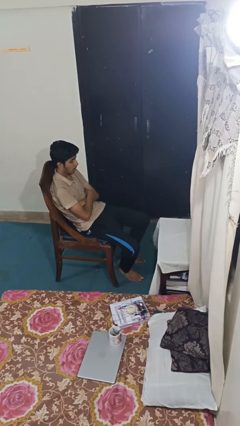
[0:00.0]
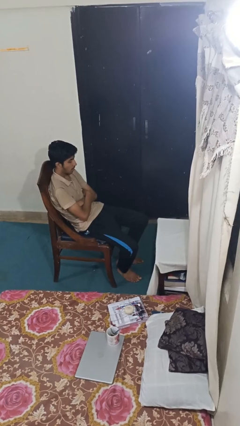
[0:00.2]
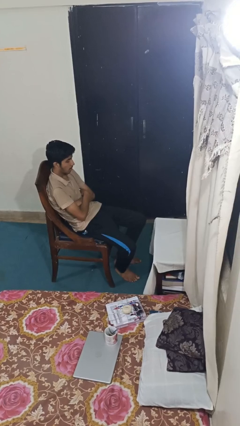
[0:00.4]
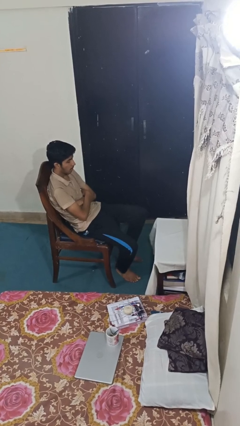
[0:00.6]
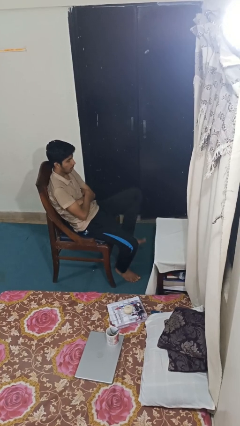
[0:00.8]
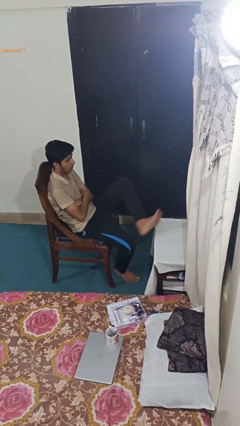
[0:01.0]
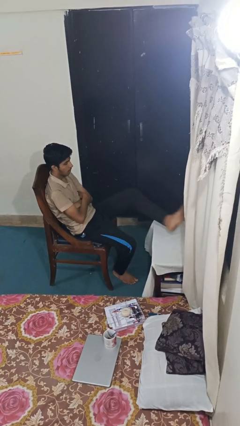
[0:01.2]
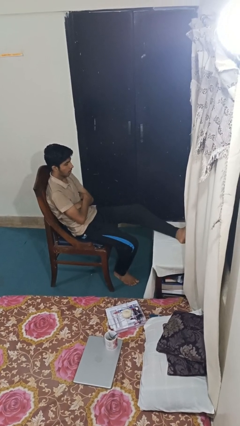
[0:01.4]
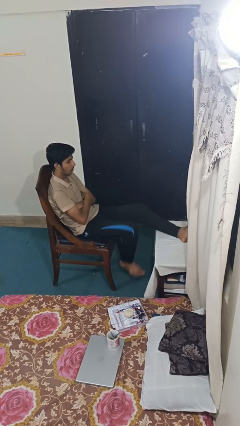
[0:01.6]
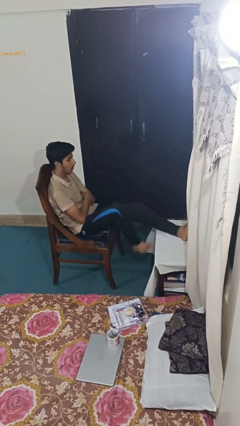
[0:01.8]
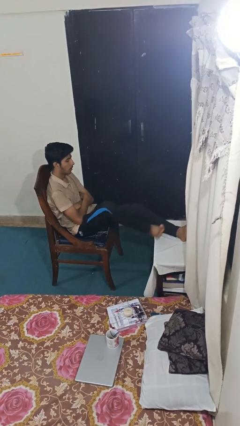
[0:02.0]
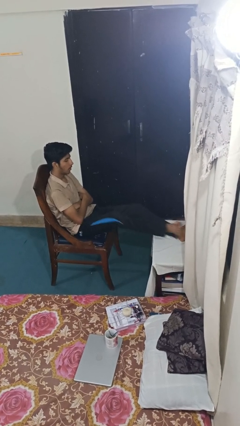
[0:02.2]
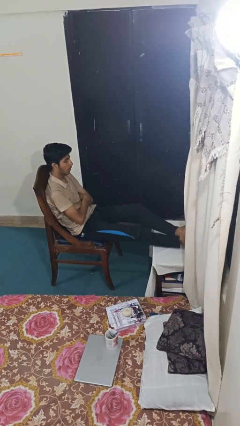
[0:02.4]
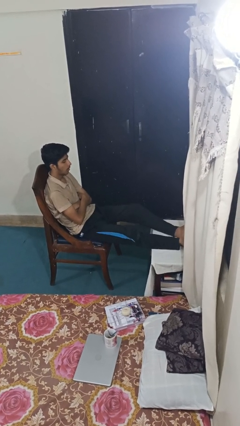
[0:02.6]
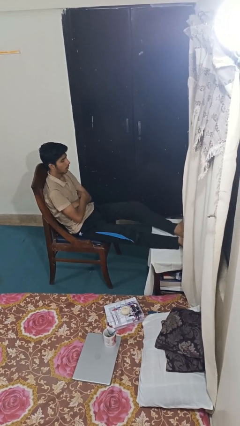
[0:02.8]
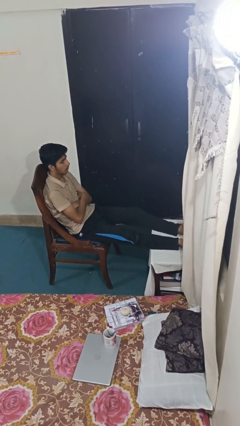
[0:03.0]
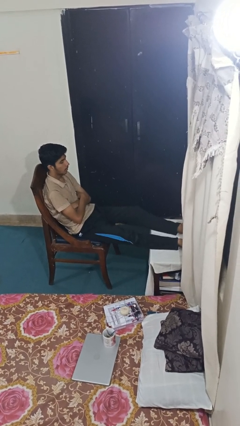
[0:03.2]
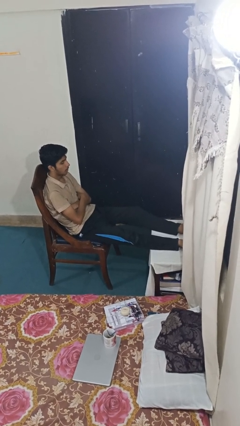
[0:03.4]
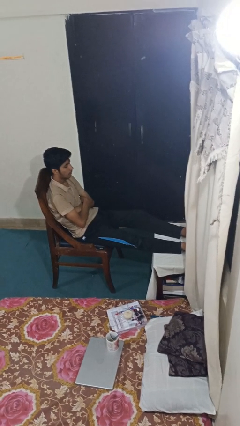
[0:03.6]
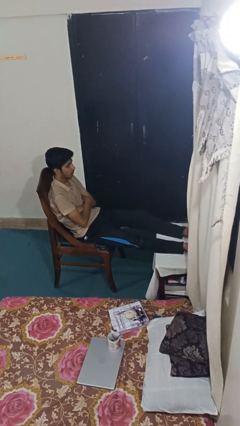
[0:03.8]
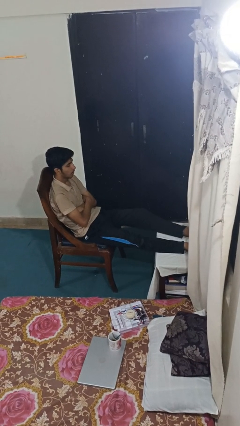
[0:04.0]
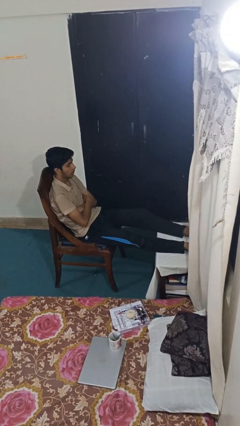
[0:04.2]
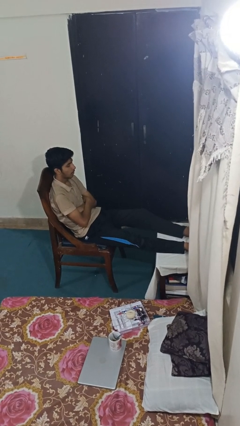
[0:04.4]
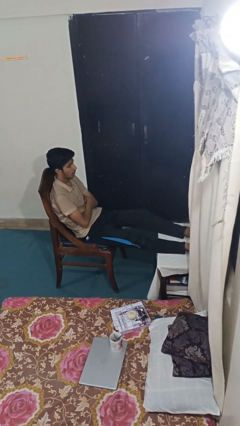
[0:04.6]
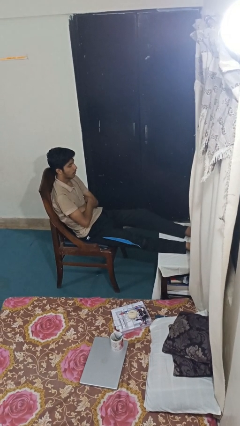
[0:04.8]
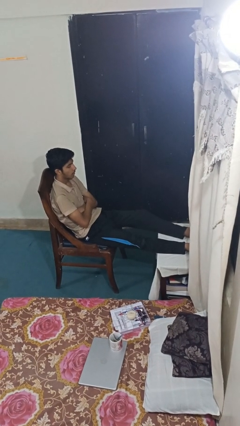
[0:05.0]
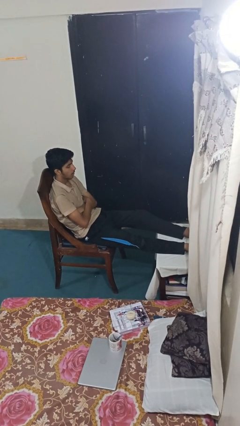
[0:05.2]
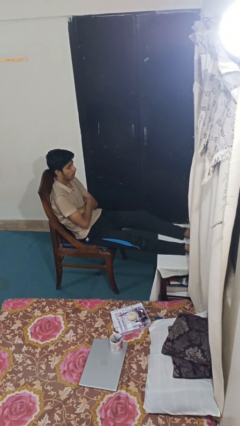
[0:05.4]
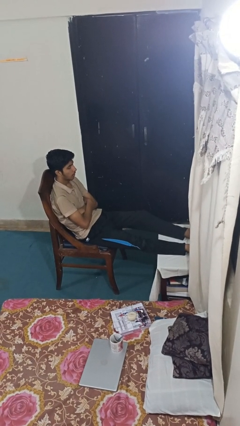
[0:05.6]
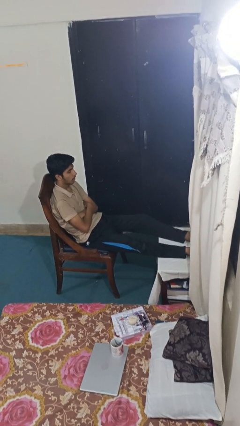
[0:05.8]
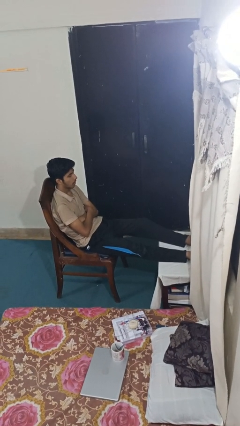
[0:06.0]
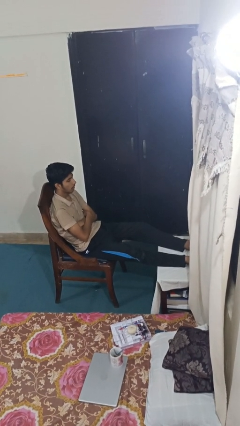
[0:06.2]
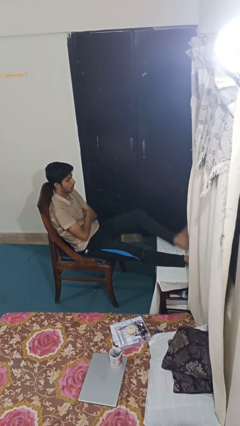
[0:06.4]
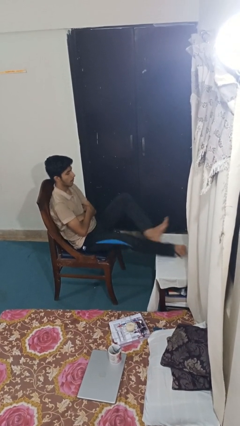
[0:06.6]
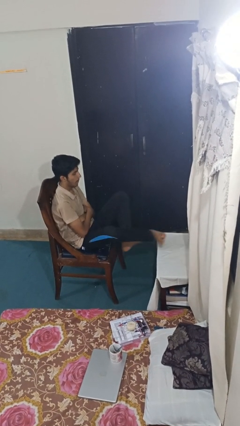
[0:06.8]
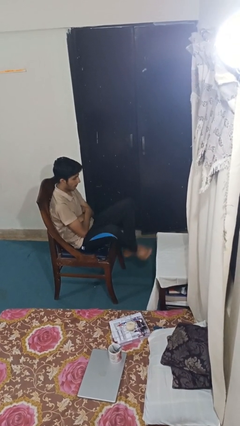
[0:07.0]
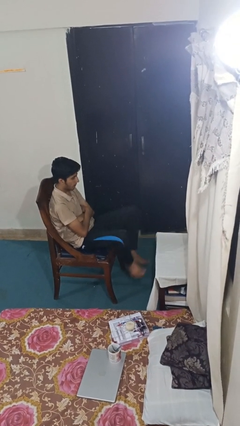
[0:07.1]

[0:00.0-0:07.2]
person puts feet up

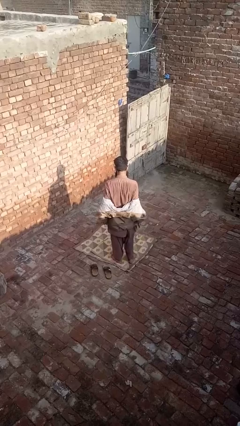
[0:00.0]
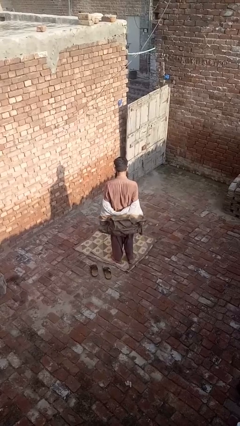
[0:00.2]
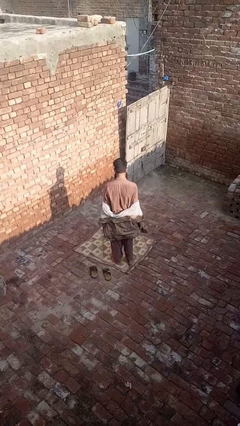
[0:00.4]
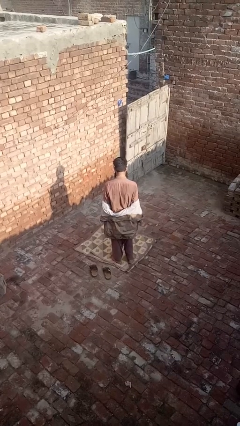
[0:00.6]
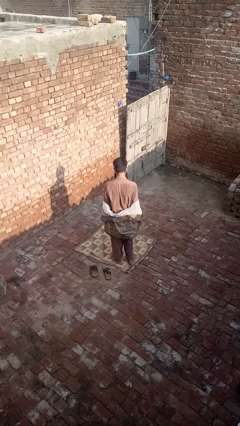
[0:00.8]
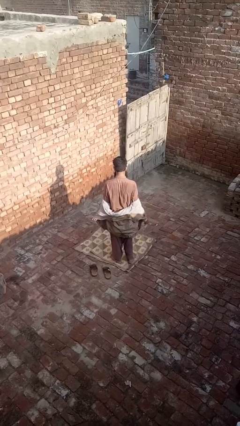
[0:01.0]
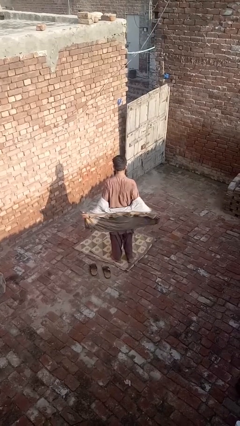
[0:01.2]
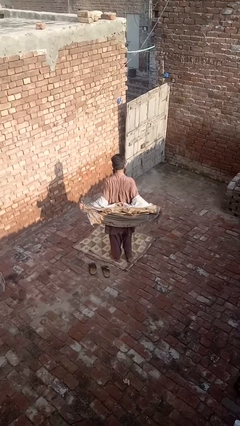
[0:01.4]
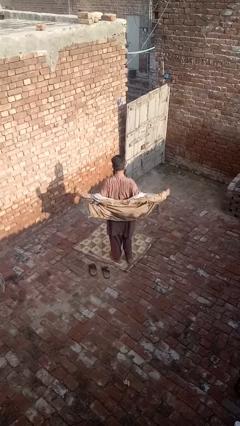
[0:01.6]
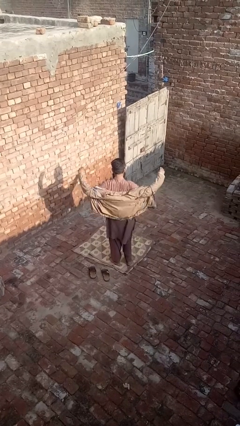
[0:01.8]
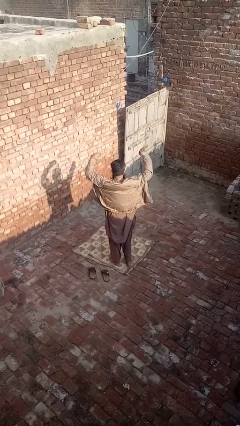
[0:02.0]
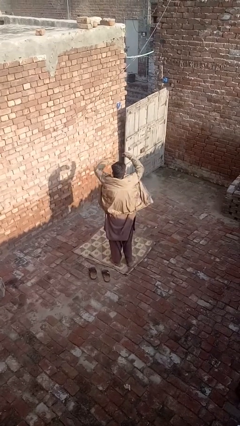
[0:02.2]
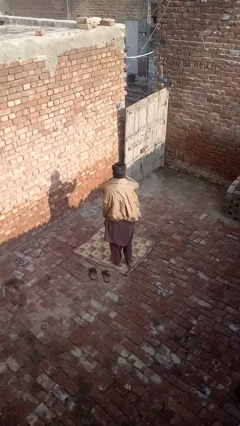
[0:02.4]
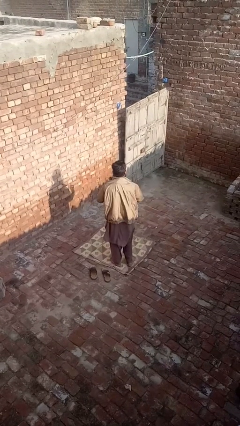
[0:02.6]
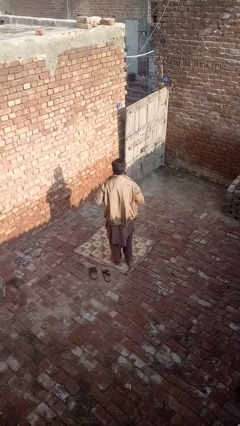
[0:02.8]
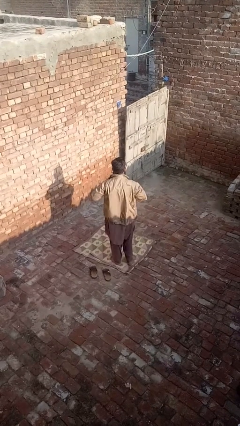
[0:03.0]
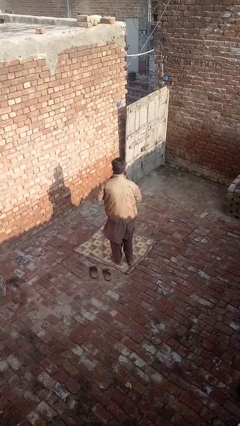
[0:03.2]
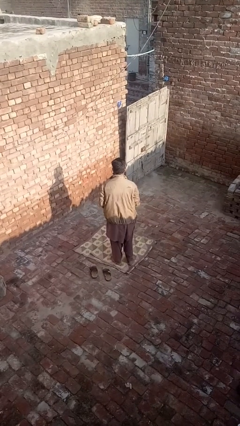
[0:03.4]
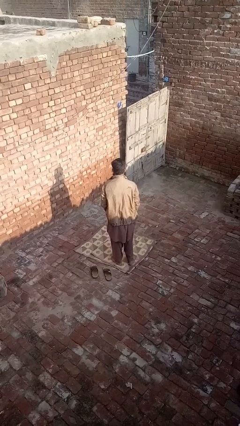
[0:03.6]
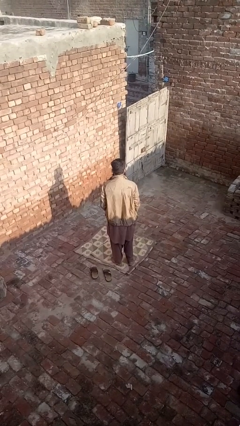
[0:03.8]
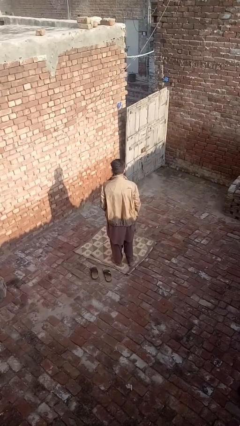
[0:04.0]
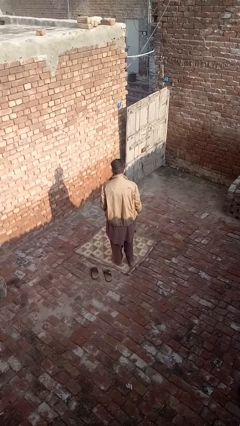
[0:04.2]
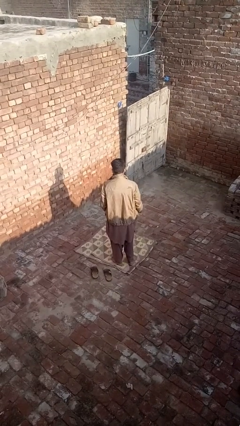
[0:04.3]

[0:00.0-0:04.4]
person puts on jacket

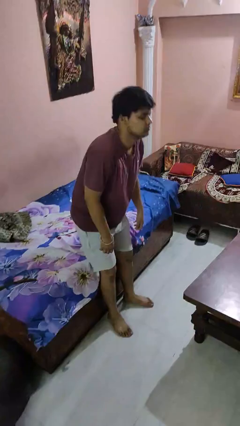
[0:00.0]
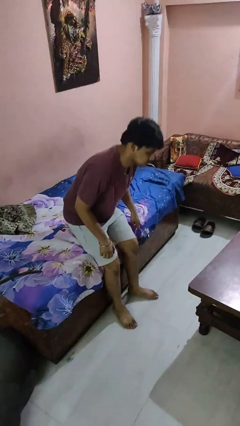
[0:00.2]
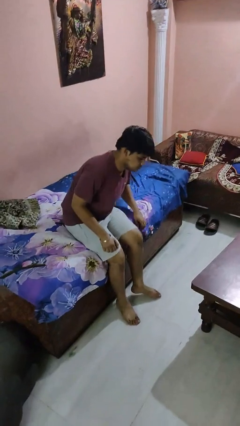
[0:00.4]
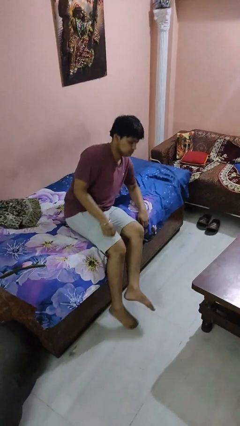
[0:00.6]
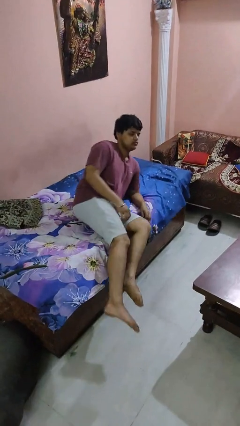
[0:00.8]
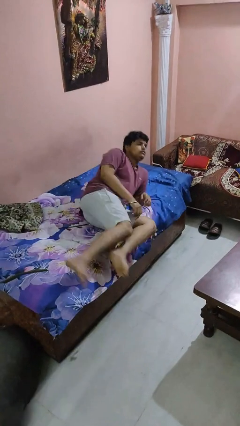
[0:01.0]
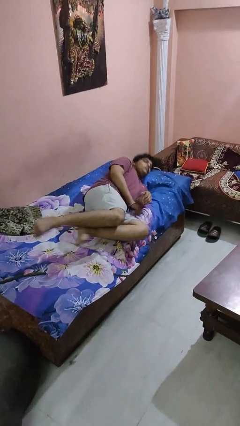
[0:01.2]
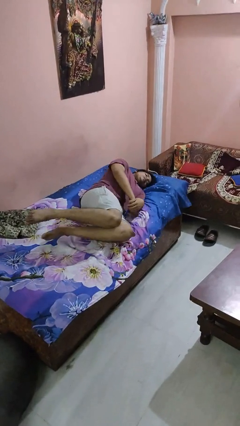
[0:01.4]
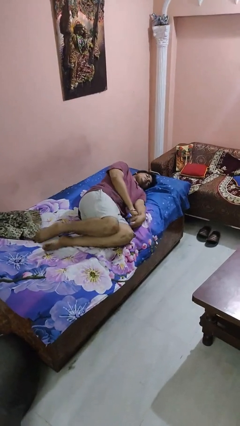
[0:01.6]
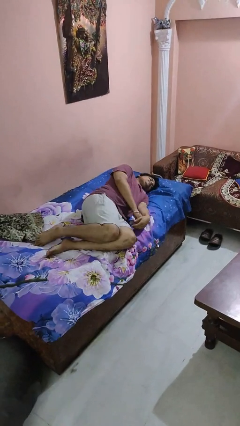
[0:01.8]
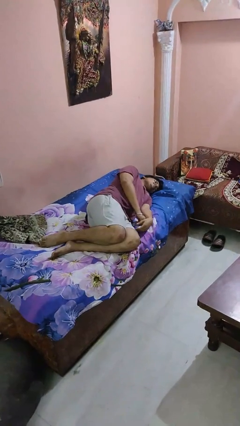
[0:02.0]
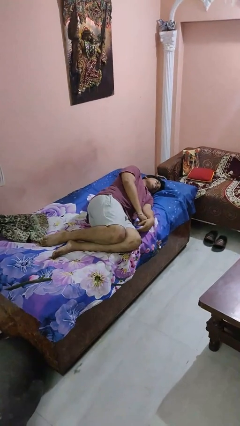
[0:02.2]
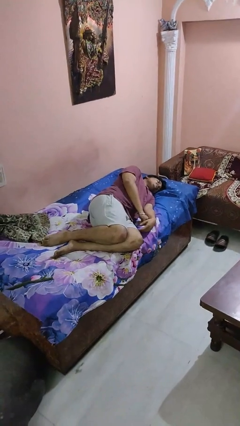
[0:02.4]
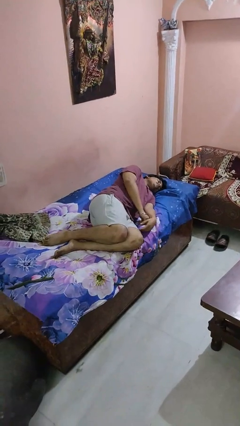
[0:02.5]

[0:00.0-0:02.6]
person lies down on bed

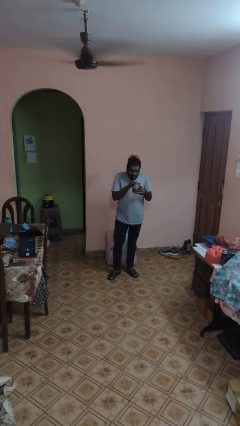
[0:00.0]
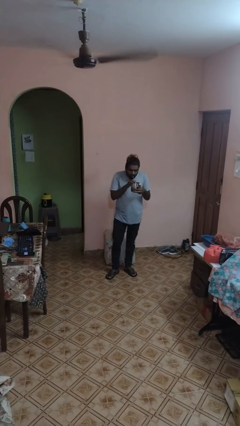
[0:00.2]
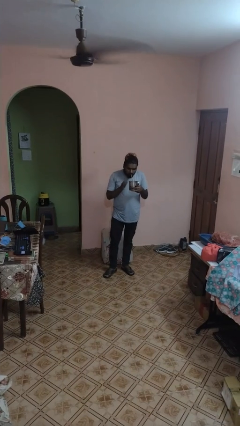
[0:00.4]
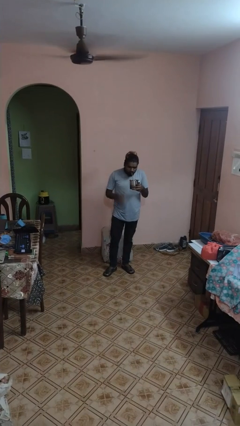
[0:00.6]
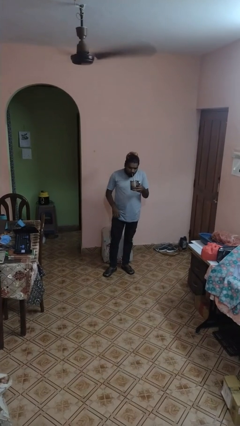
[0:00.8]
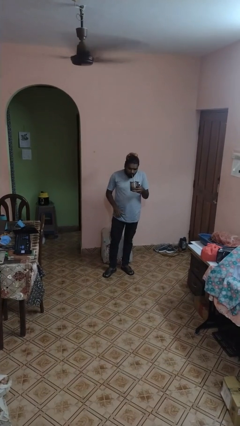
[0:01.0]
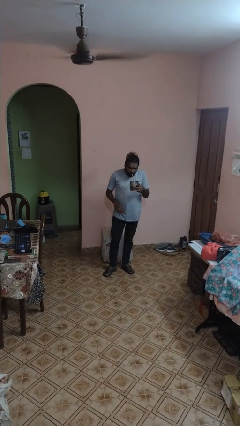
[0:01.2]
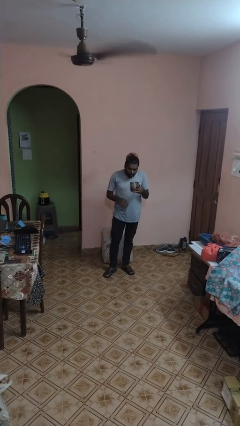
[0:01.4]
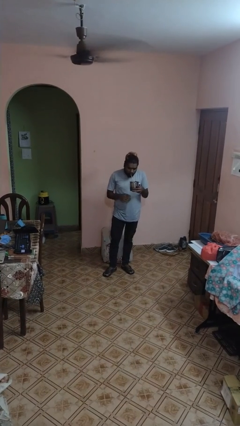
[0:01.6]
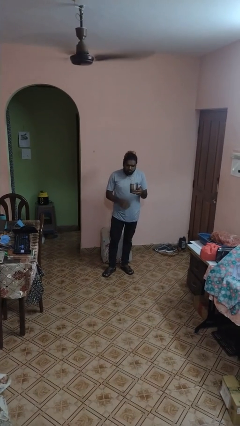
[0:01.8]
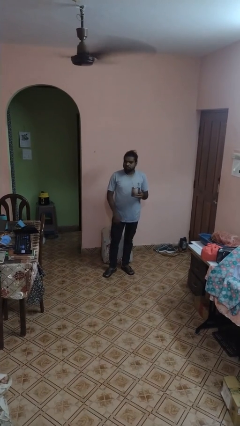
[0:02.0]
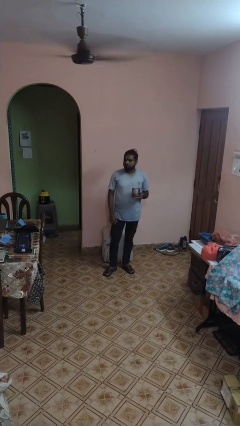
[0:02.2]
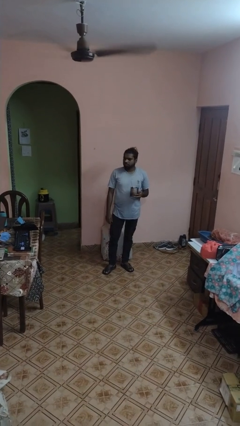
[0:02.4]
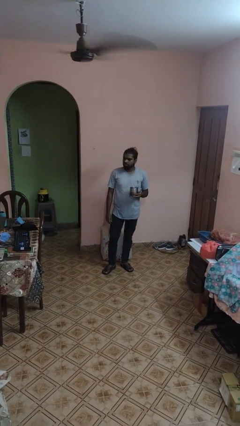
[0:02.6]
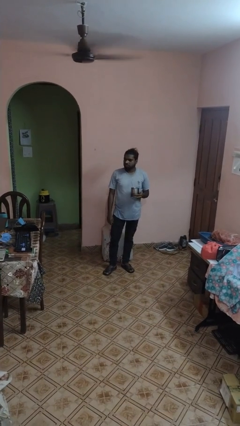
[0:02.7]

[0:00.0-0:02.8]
person drinks from straw

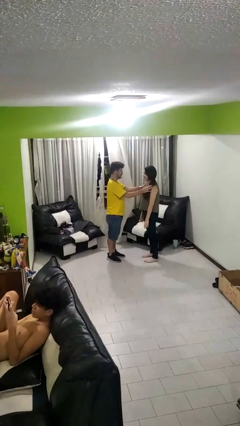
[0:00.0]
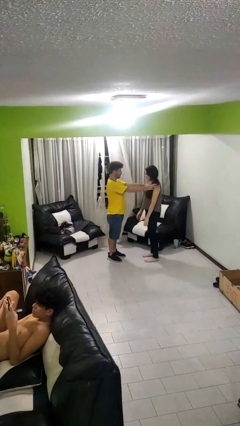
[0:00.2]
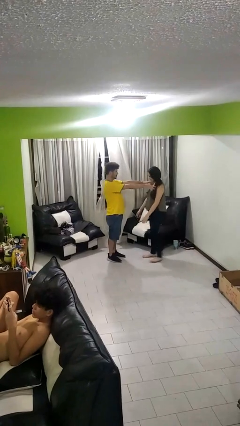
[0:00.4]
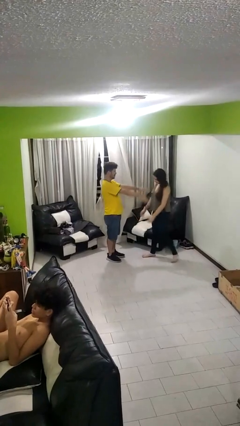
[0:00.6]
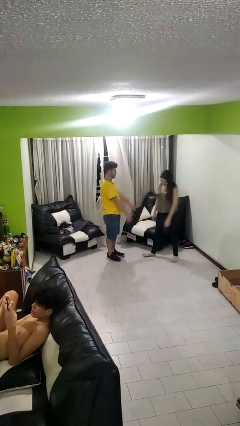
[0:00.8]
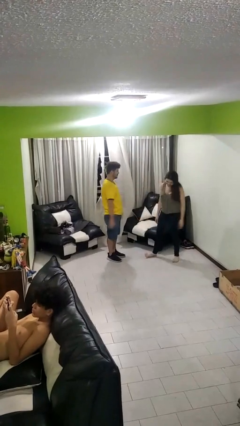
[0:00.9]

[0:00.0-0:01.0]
person shoves person
